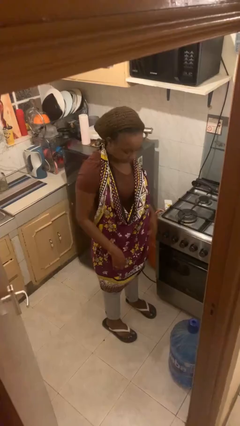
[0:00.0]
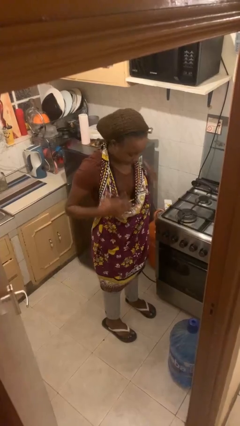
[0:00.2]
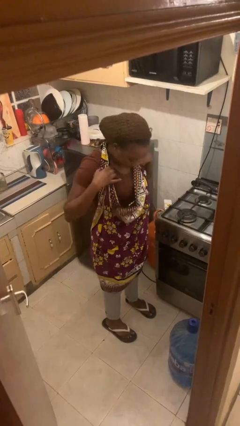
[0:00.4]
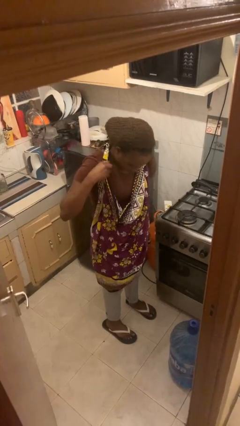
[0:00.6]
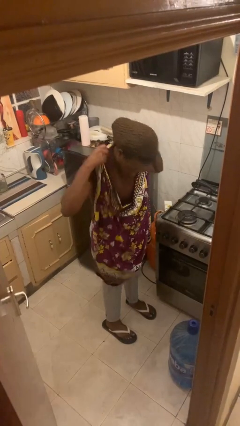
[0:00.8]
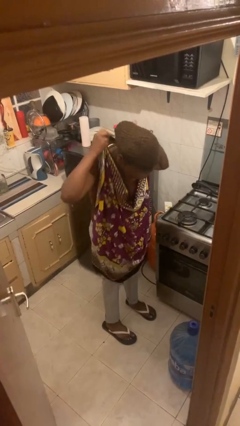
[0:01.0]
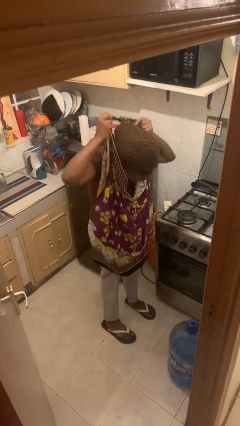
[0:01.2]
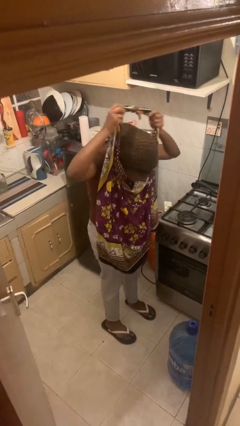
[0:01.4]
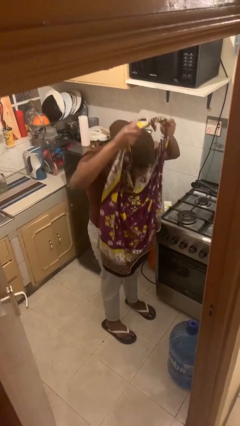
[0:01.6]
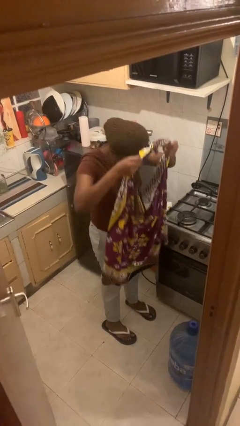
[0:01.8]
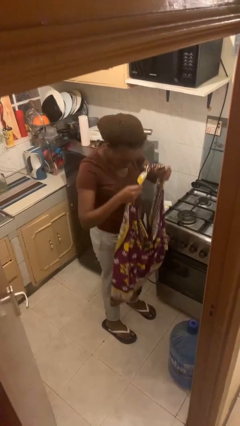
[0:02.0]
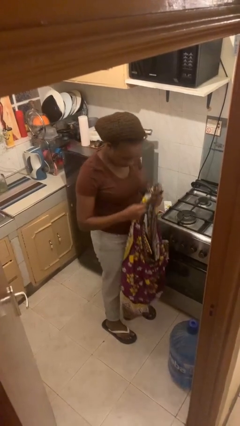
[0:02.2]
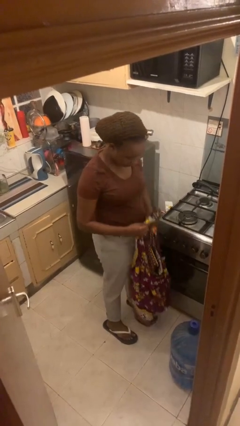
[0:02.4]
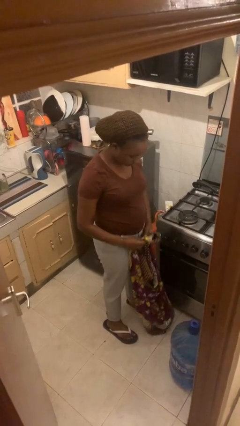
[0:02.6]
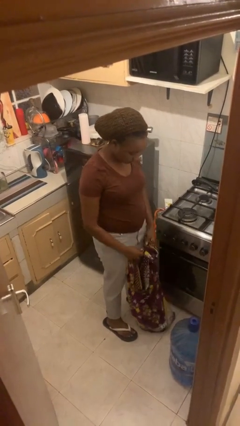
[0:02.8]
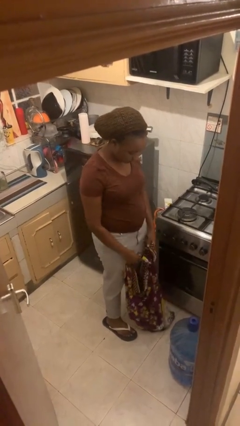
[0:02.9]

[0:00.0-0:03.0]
person takes off apron

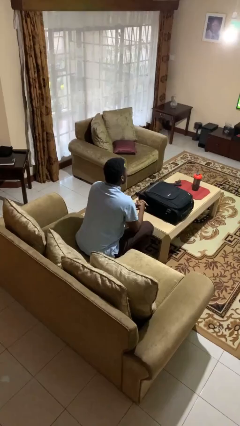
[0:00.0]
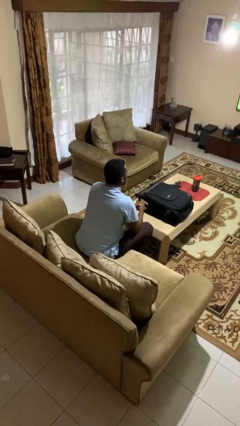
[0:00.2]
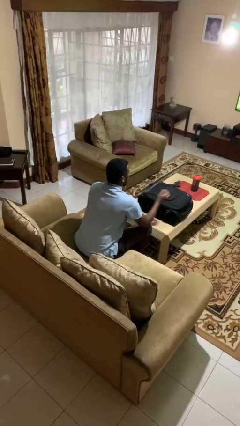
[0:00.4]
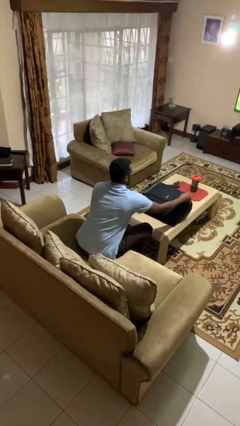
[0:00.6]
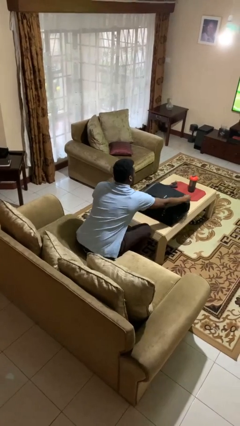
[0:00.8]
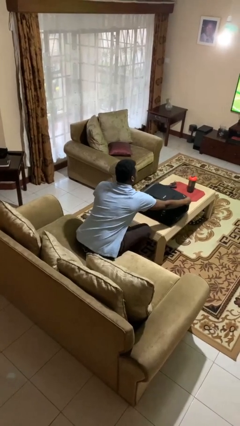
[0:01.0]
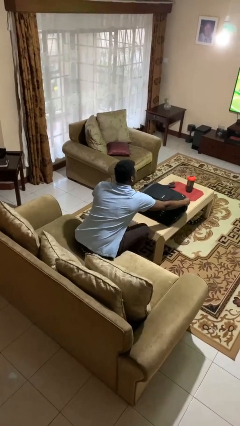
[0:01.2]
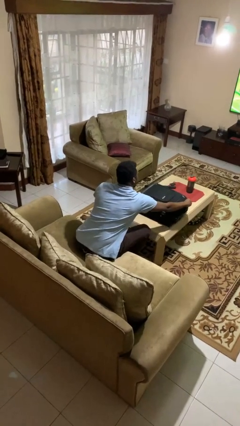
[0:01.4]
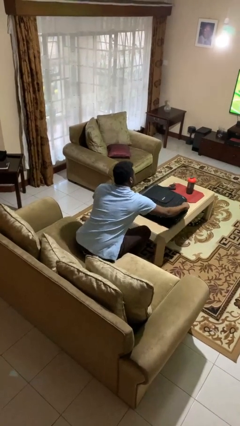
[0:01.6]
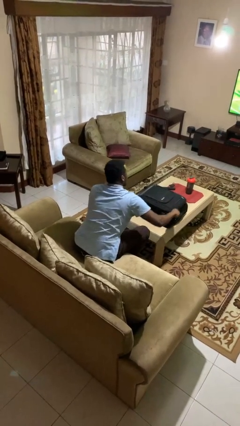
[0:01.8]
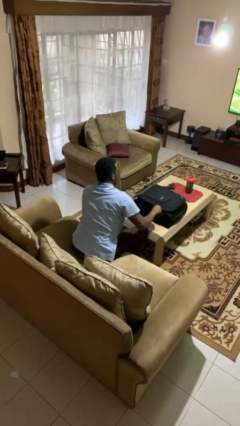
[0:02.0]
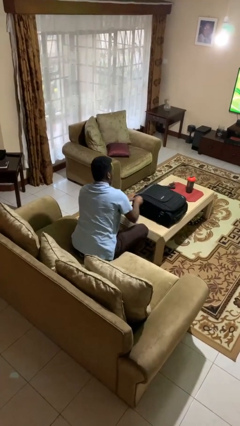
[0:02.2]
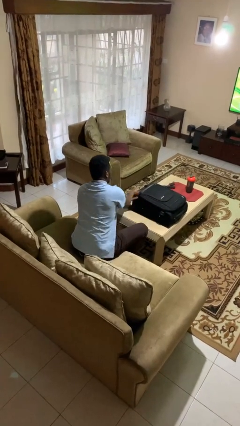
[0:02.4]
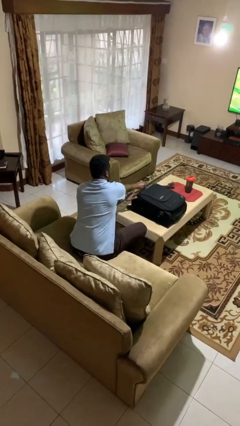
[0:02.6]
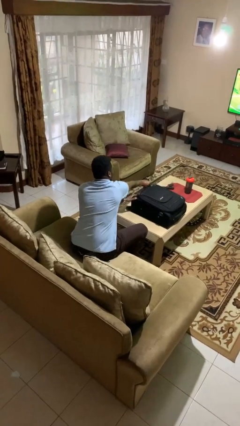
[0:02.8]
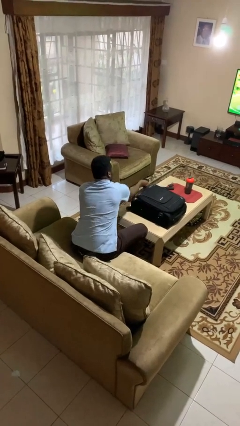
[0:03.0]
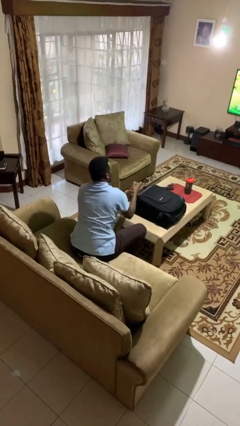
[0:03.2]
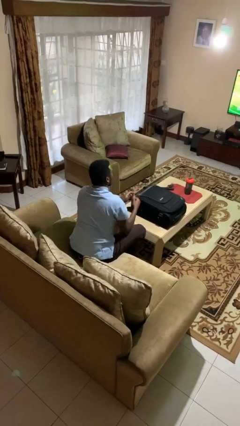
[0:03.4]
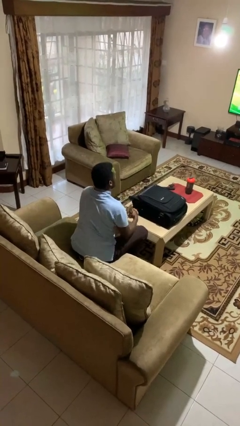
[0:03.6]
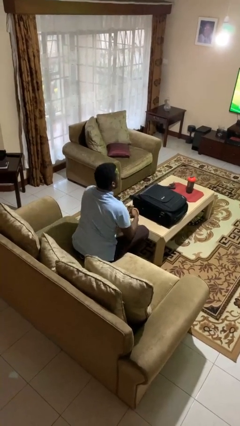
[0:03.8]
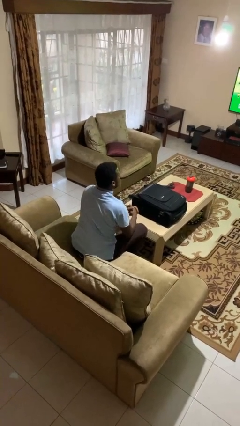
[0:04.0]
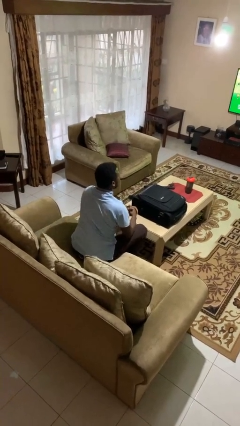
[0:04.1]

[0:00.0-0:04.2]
person opens suitcase

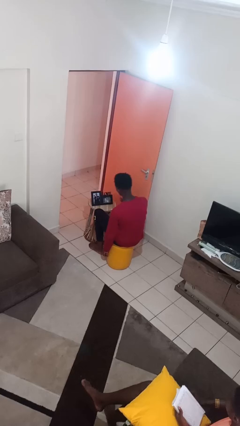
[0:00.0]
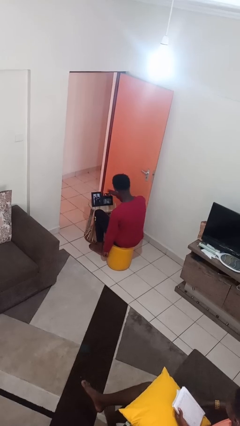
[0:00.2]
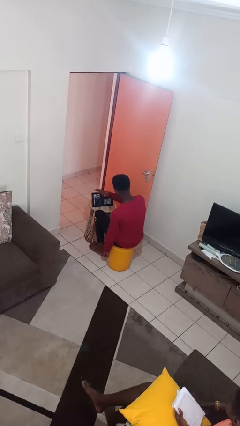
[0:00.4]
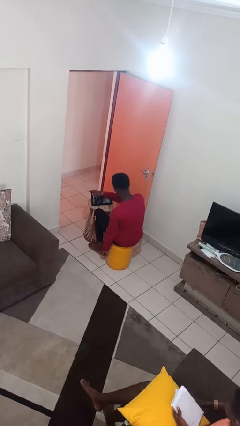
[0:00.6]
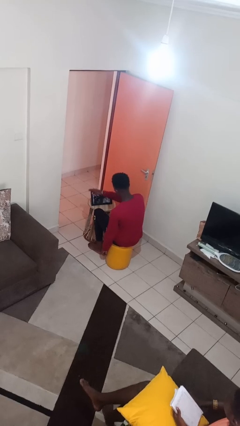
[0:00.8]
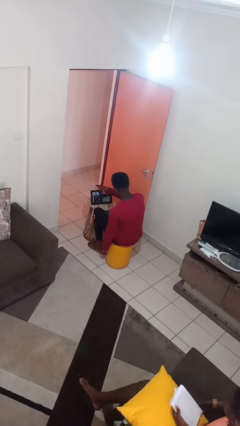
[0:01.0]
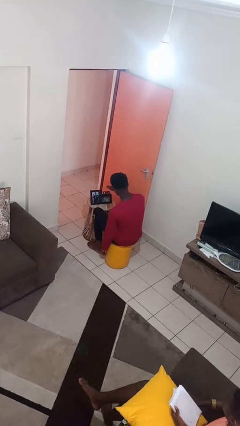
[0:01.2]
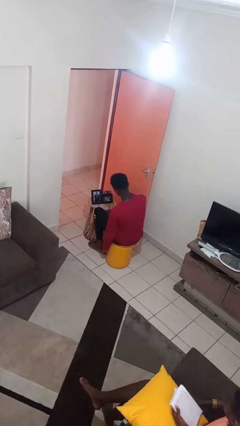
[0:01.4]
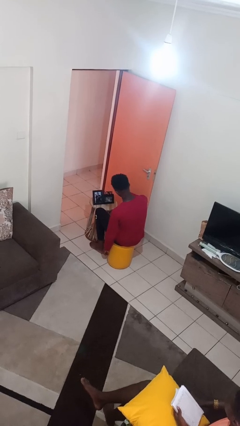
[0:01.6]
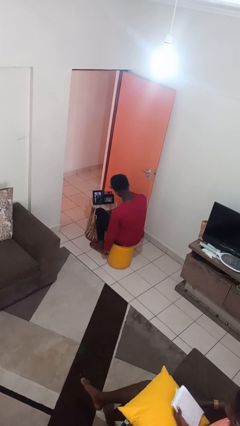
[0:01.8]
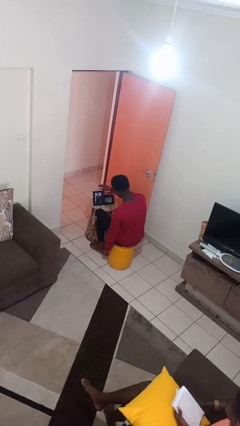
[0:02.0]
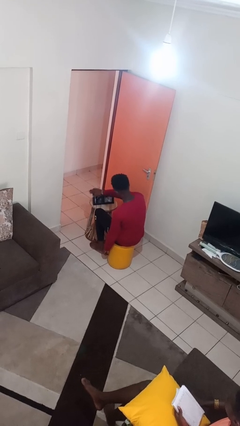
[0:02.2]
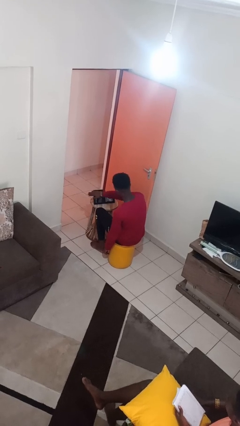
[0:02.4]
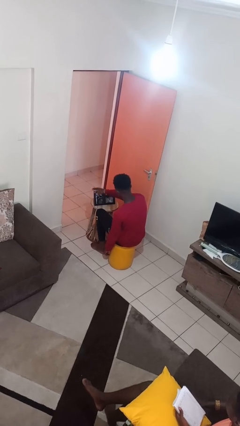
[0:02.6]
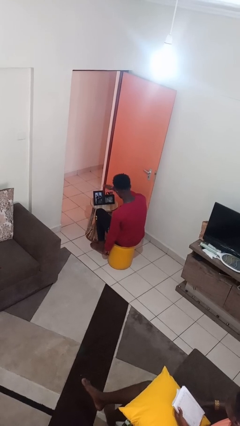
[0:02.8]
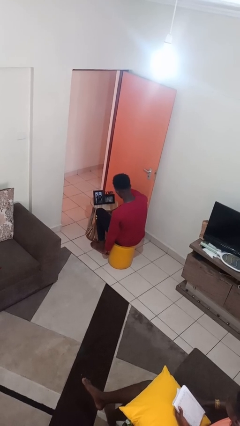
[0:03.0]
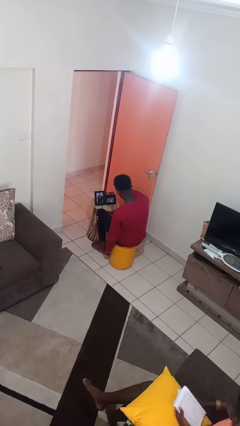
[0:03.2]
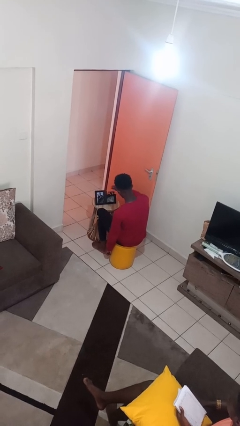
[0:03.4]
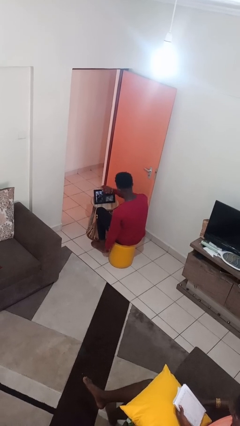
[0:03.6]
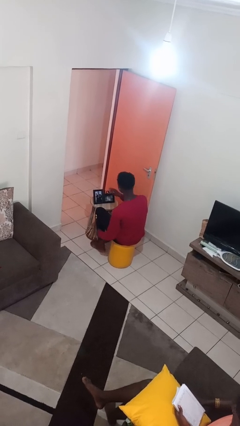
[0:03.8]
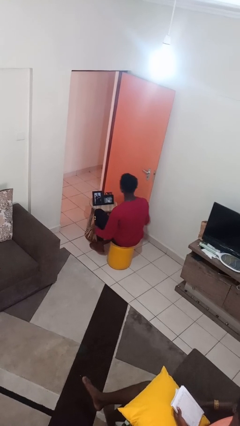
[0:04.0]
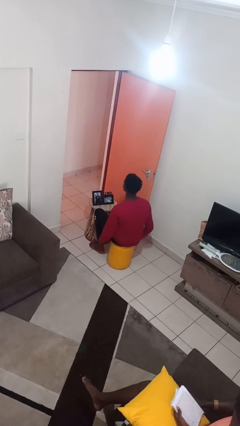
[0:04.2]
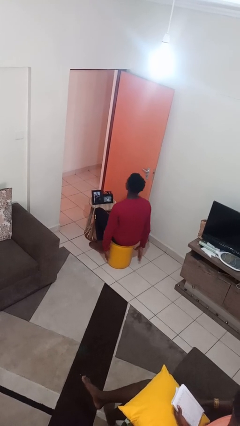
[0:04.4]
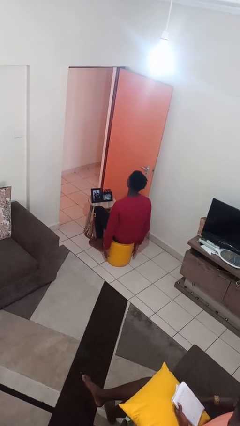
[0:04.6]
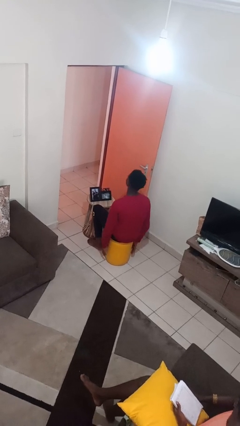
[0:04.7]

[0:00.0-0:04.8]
person waves hand over object

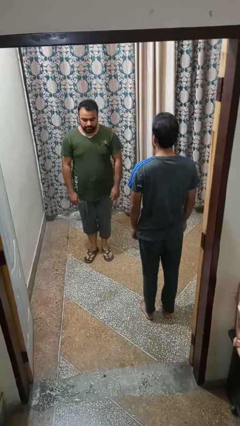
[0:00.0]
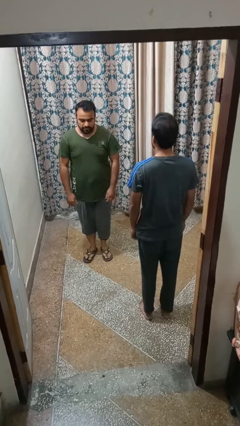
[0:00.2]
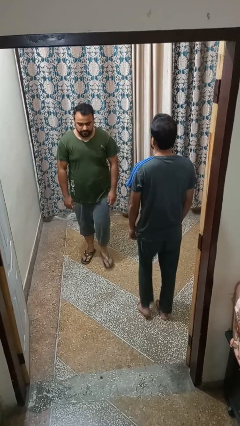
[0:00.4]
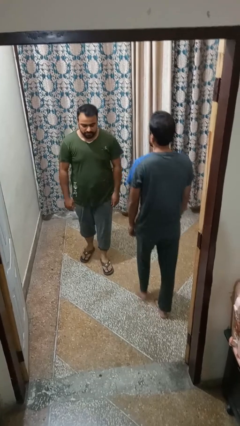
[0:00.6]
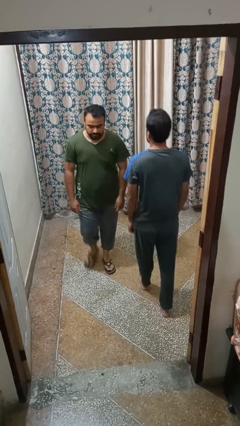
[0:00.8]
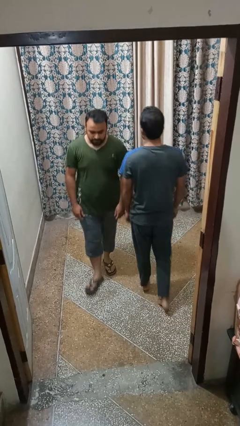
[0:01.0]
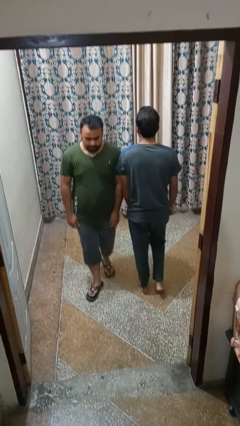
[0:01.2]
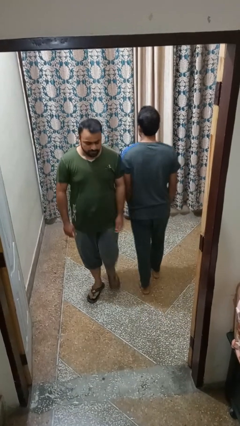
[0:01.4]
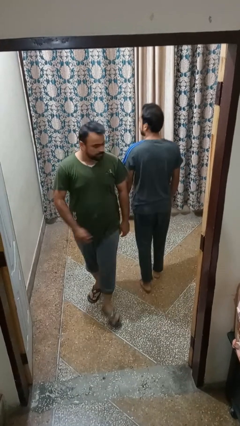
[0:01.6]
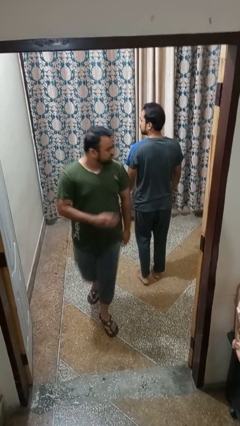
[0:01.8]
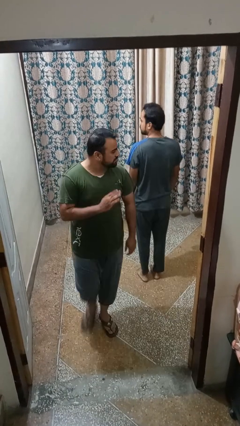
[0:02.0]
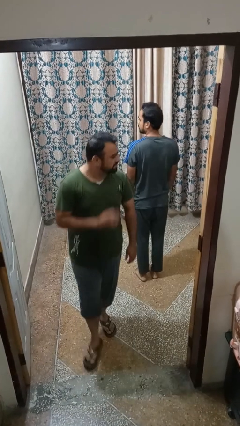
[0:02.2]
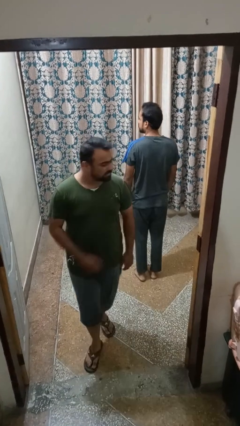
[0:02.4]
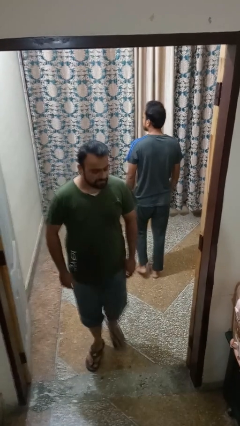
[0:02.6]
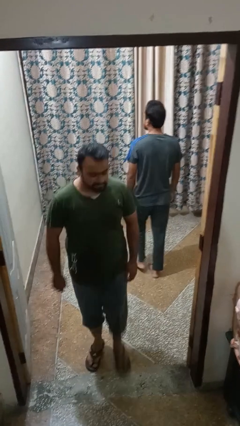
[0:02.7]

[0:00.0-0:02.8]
person bumps into person

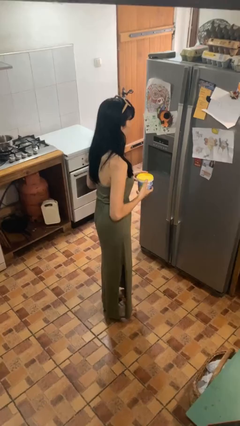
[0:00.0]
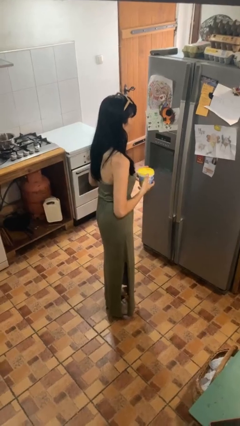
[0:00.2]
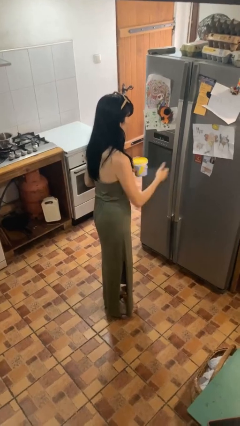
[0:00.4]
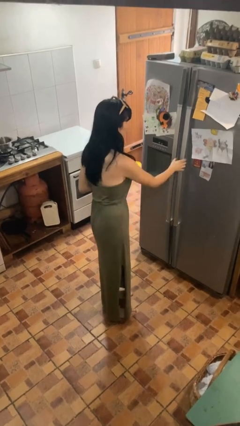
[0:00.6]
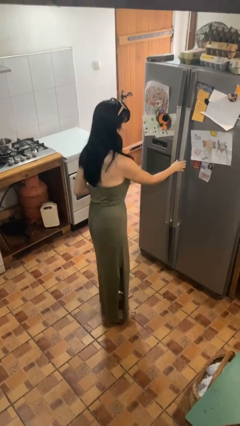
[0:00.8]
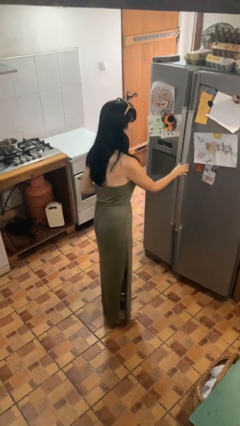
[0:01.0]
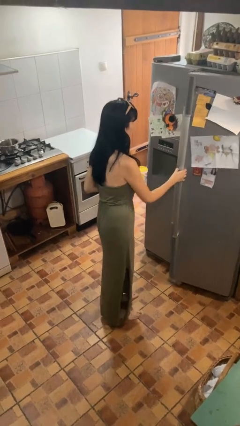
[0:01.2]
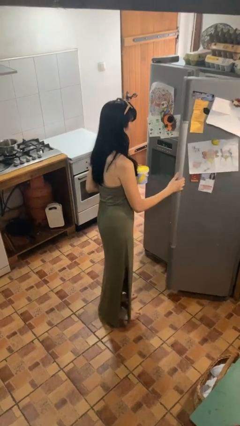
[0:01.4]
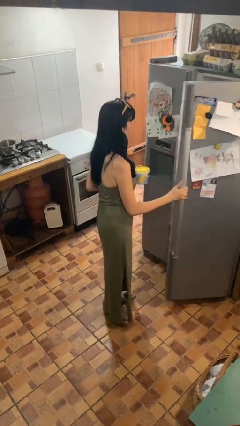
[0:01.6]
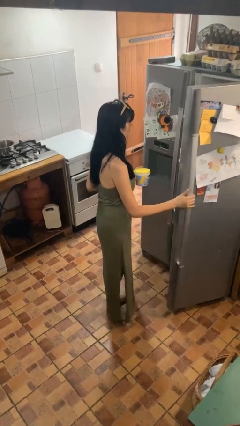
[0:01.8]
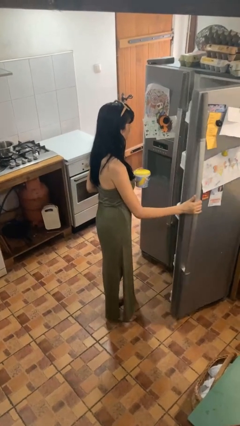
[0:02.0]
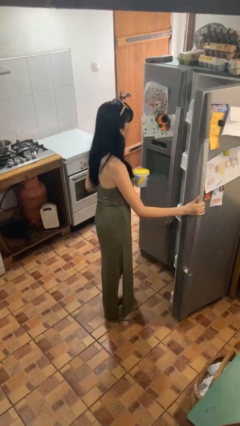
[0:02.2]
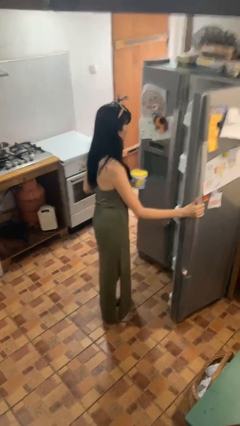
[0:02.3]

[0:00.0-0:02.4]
person opens refrigerator

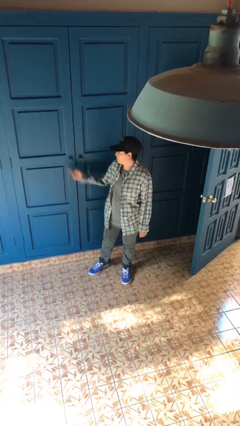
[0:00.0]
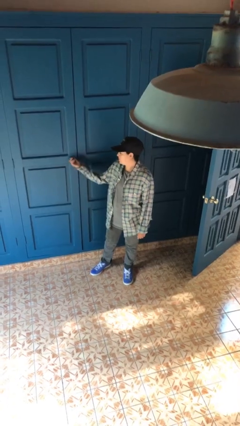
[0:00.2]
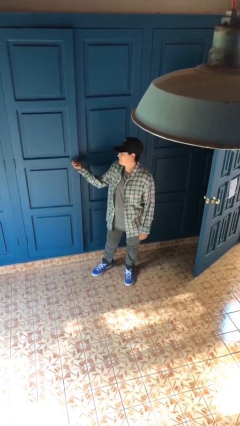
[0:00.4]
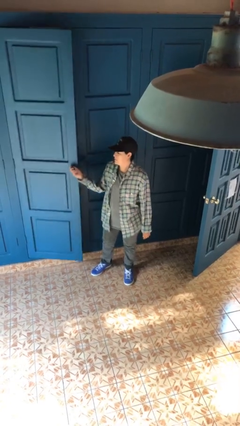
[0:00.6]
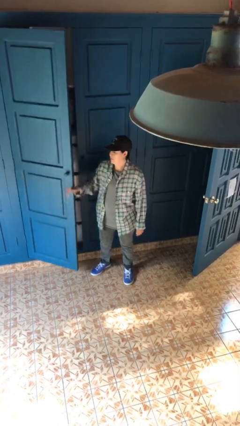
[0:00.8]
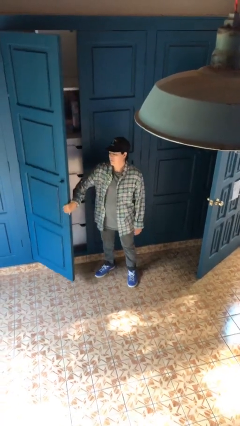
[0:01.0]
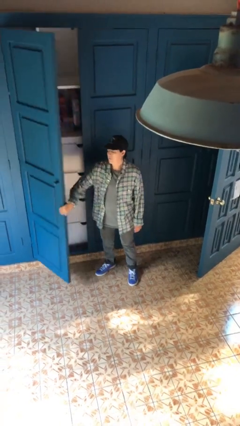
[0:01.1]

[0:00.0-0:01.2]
person opens closet door
